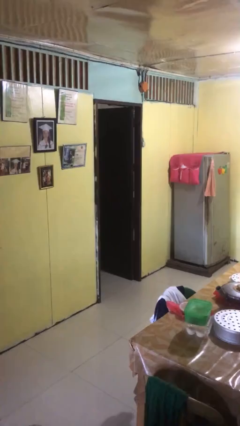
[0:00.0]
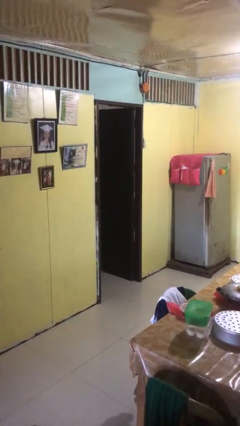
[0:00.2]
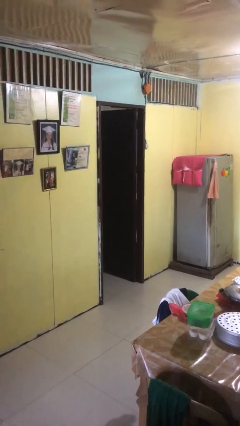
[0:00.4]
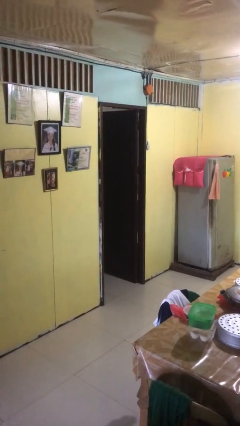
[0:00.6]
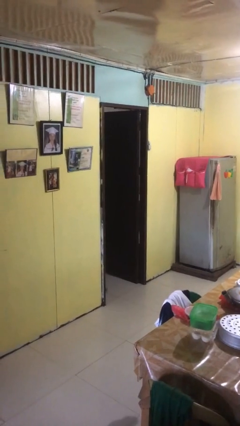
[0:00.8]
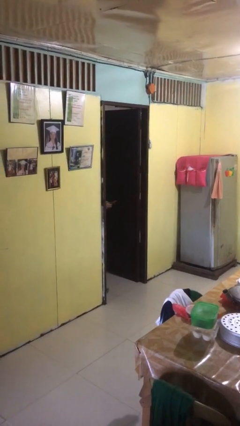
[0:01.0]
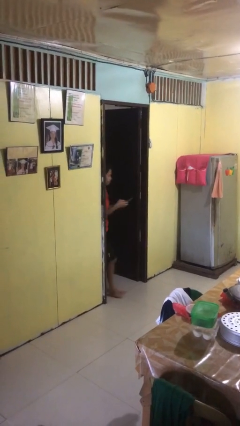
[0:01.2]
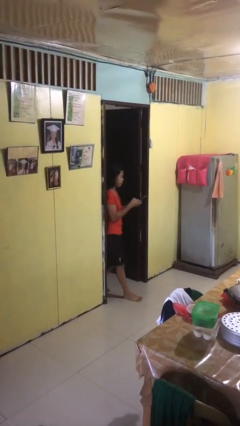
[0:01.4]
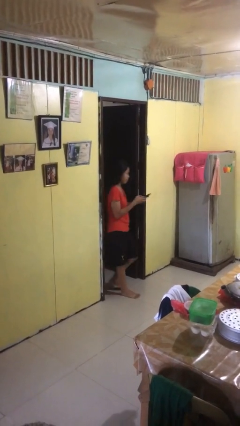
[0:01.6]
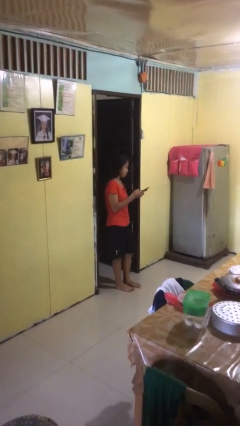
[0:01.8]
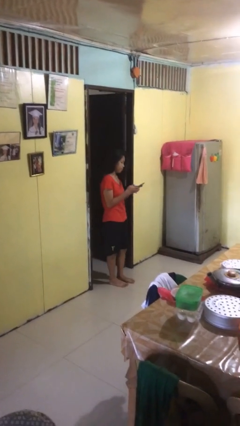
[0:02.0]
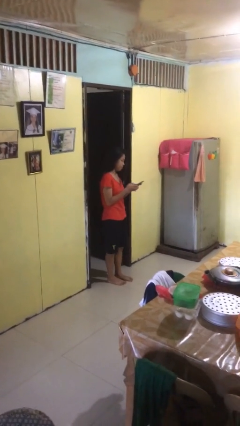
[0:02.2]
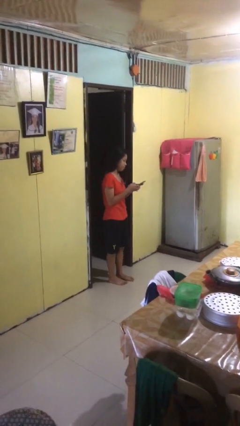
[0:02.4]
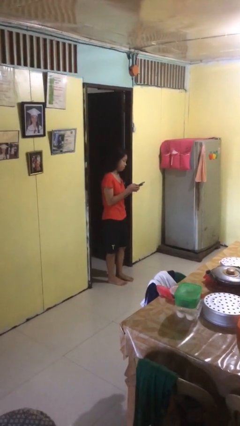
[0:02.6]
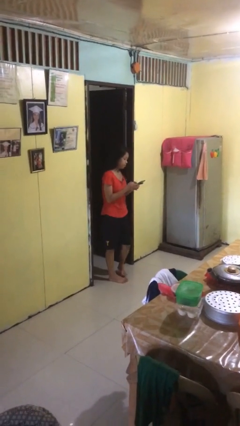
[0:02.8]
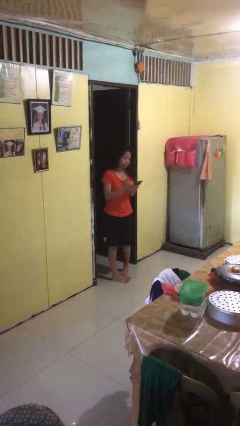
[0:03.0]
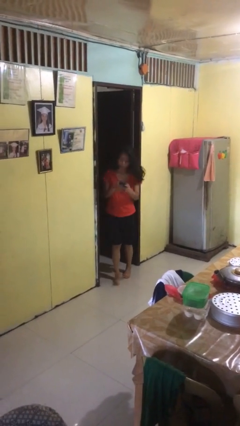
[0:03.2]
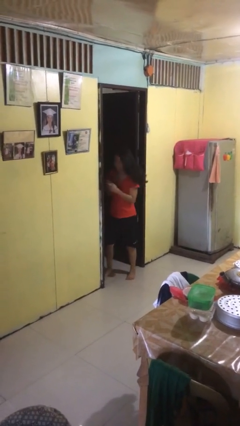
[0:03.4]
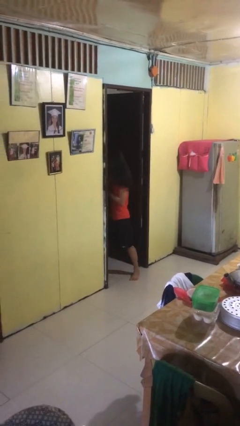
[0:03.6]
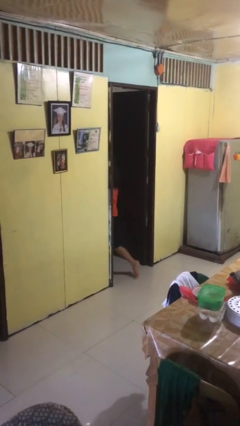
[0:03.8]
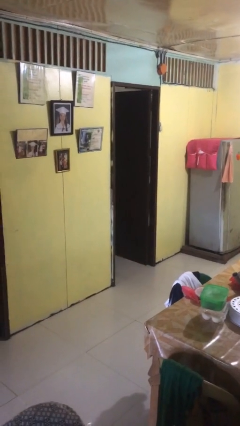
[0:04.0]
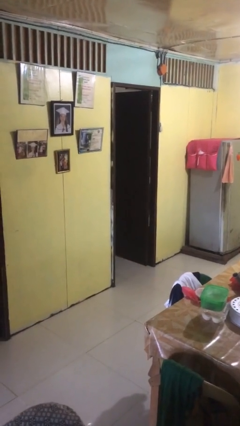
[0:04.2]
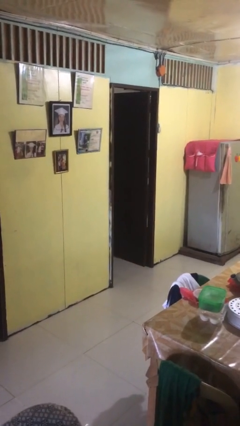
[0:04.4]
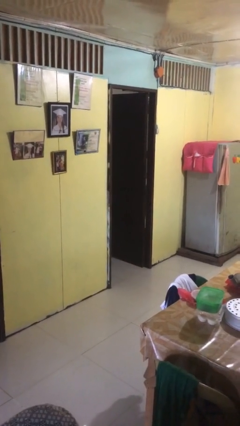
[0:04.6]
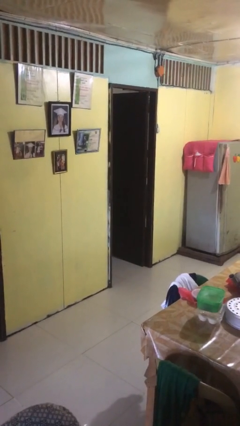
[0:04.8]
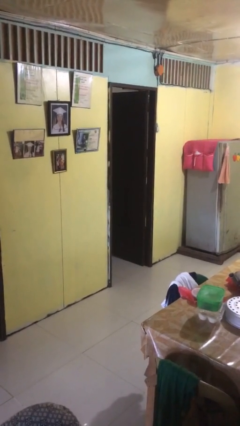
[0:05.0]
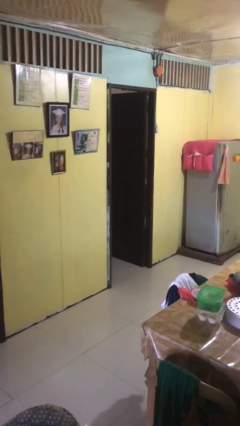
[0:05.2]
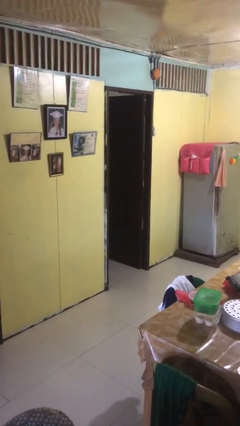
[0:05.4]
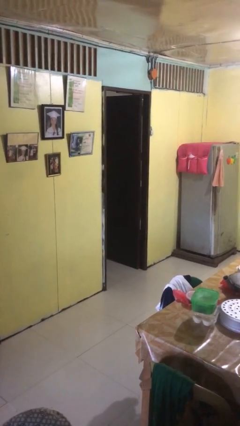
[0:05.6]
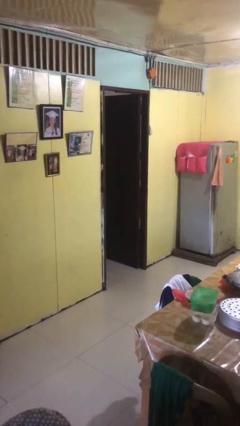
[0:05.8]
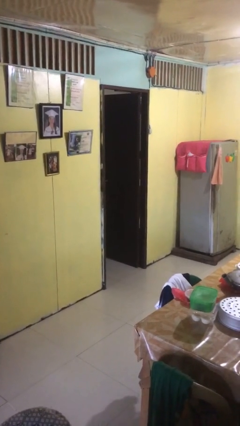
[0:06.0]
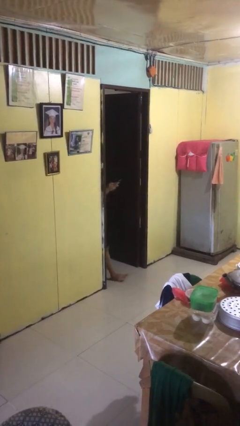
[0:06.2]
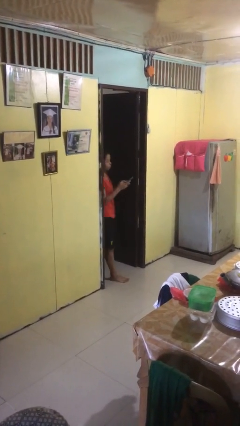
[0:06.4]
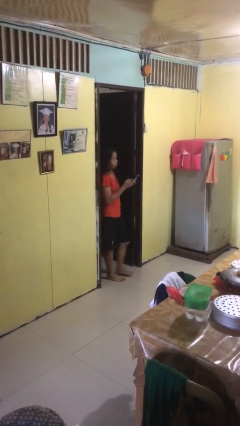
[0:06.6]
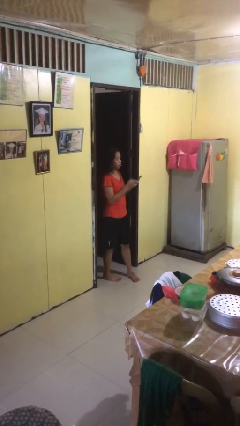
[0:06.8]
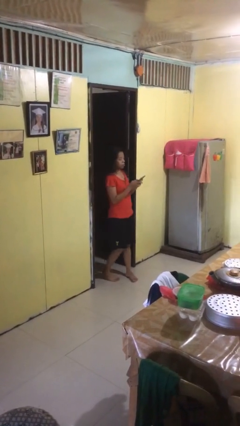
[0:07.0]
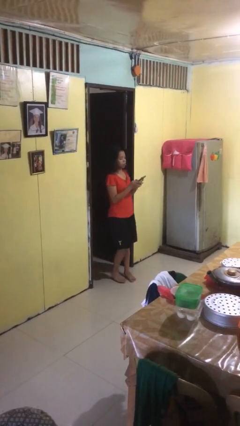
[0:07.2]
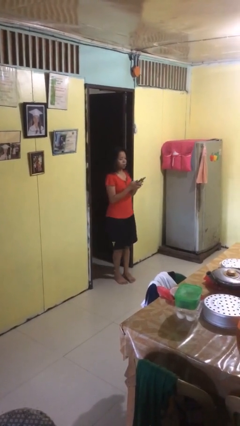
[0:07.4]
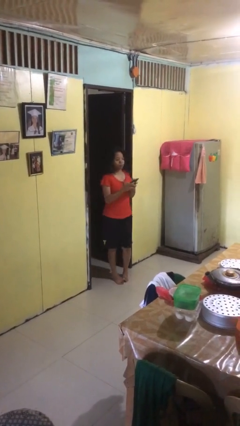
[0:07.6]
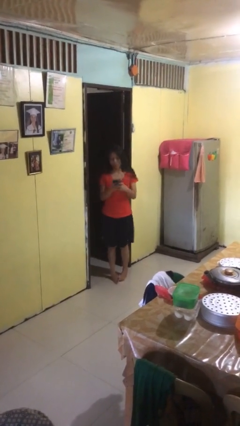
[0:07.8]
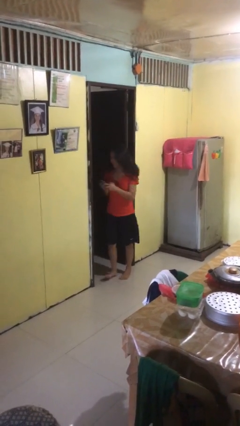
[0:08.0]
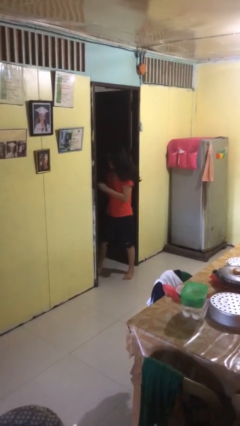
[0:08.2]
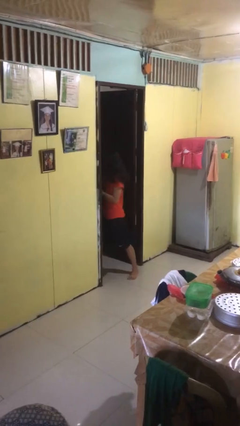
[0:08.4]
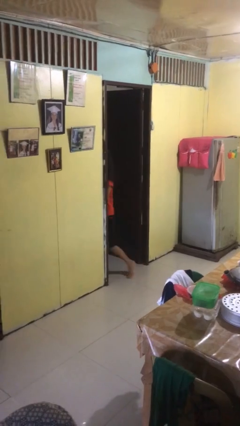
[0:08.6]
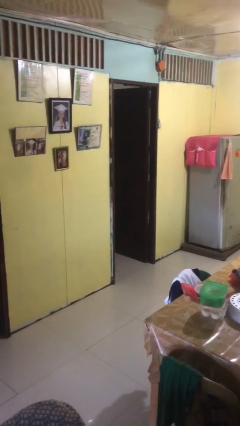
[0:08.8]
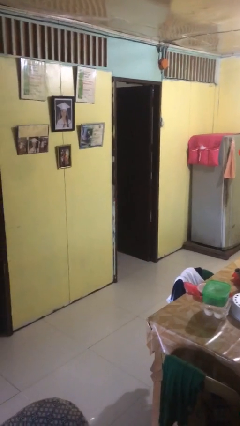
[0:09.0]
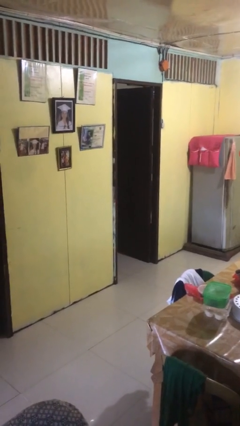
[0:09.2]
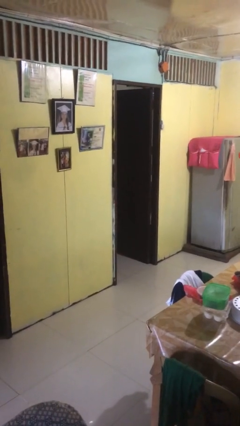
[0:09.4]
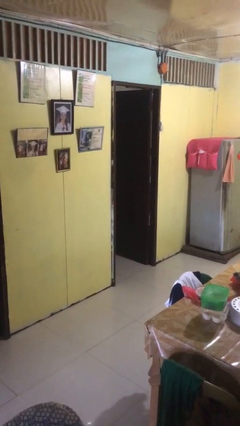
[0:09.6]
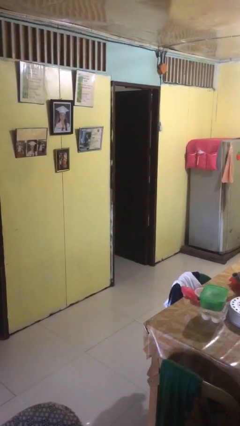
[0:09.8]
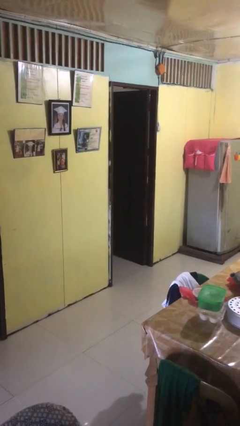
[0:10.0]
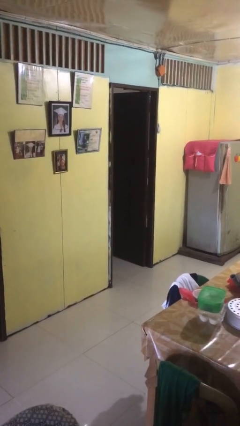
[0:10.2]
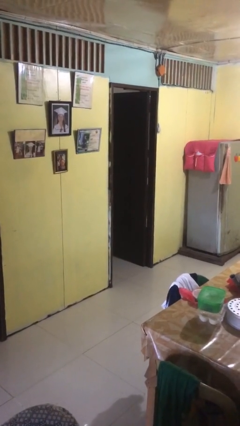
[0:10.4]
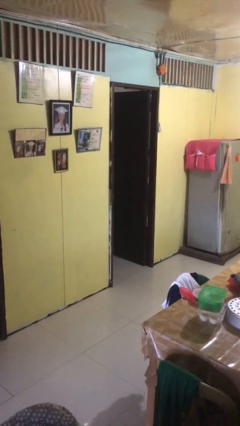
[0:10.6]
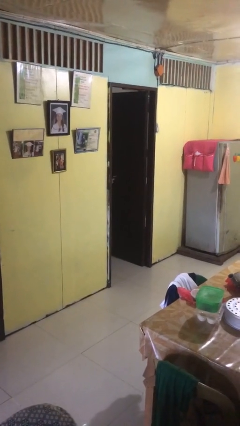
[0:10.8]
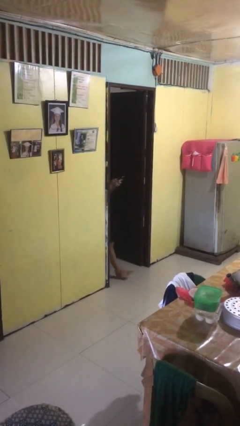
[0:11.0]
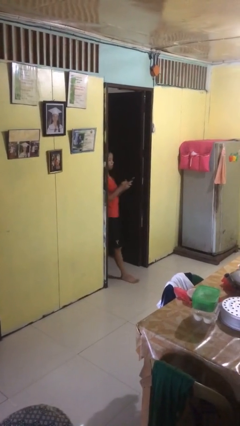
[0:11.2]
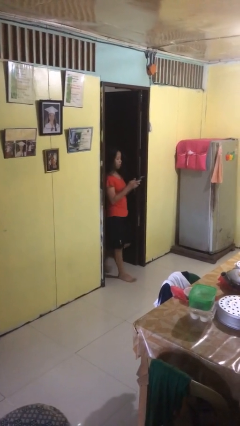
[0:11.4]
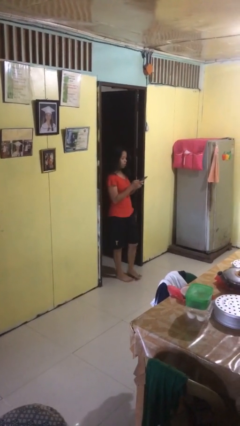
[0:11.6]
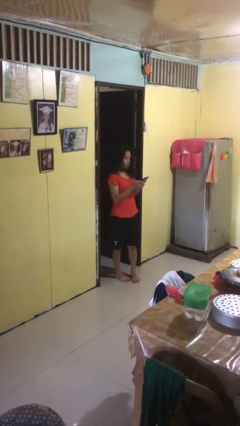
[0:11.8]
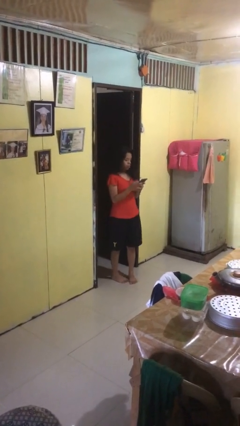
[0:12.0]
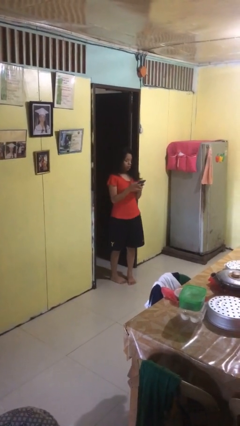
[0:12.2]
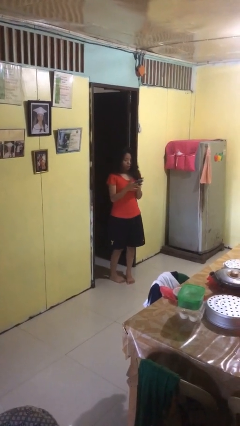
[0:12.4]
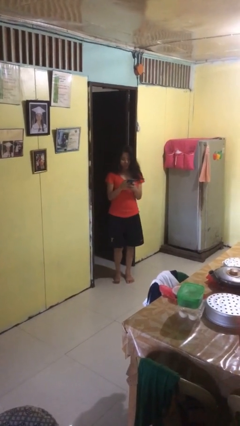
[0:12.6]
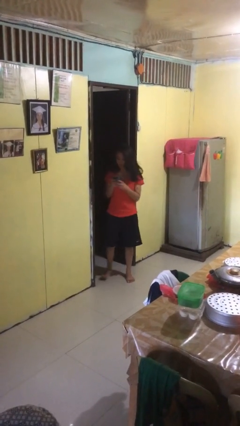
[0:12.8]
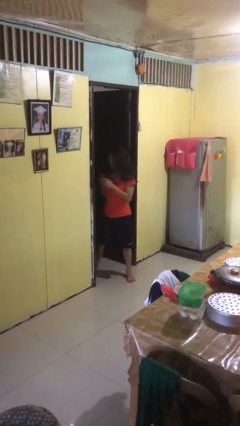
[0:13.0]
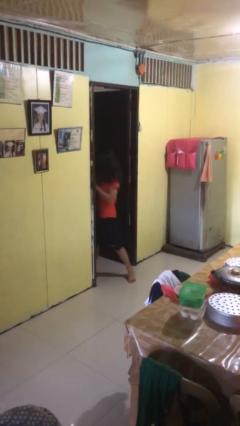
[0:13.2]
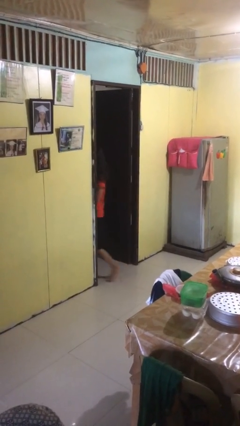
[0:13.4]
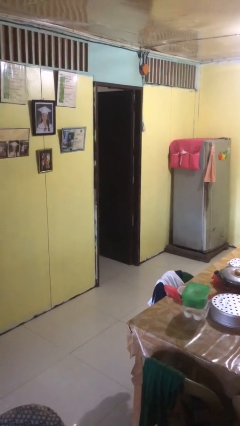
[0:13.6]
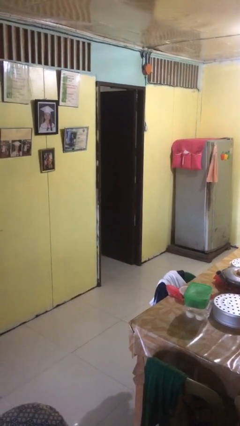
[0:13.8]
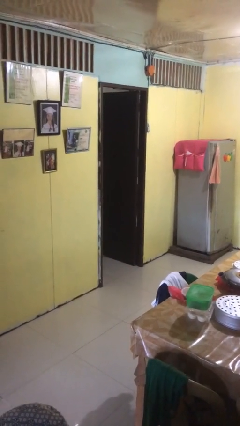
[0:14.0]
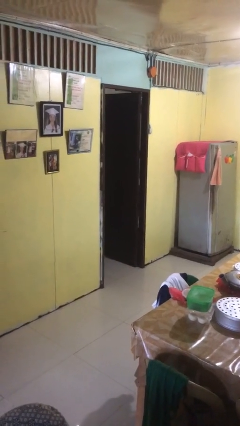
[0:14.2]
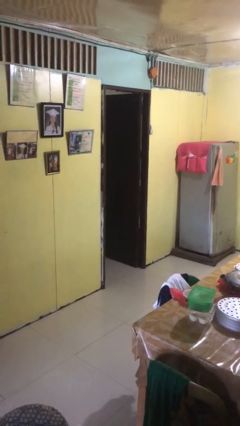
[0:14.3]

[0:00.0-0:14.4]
person texts on phone

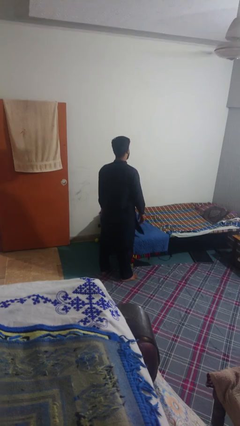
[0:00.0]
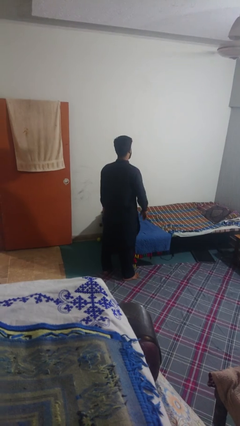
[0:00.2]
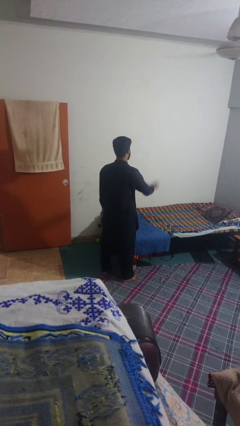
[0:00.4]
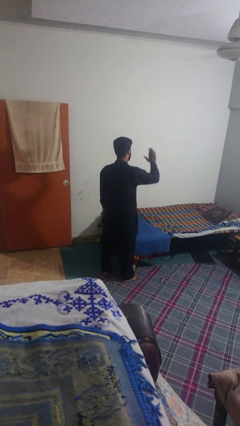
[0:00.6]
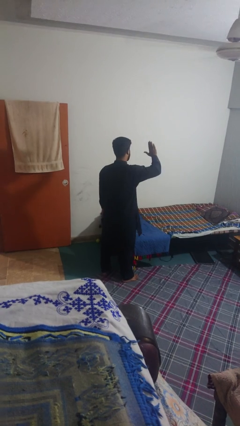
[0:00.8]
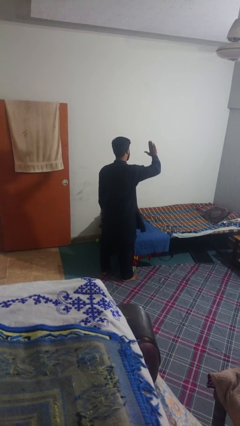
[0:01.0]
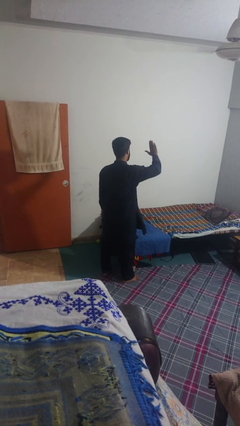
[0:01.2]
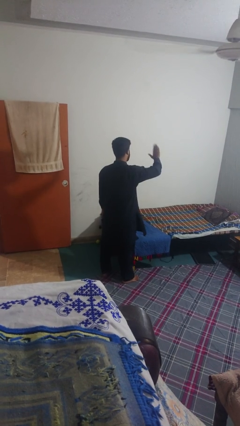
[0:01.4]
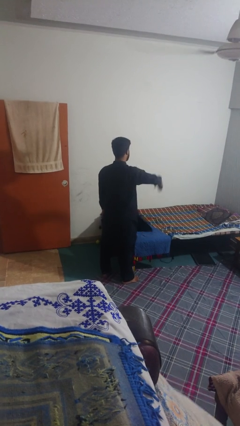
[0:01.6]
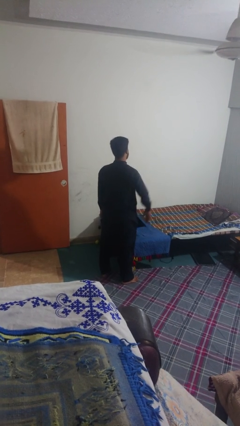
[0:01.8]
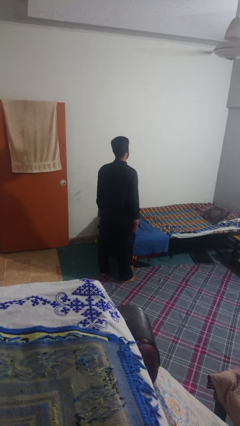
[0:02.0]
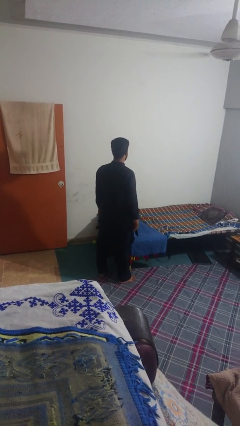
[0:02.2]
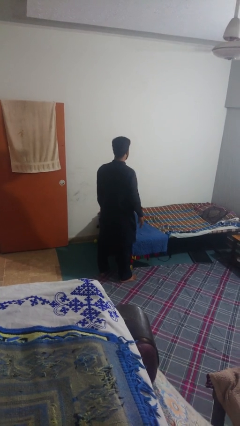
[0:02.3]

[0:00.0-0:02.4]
person gestures stop

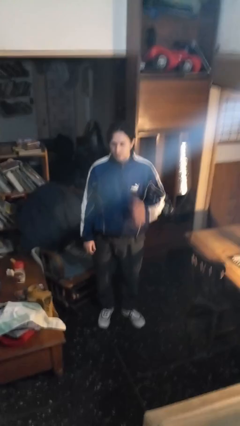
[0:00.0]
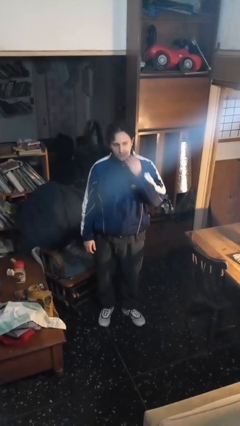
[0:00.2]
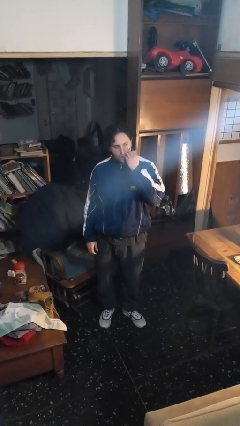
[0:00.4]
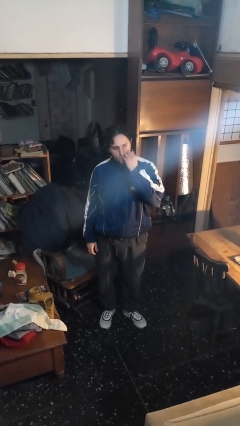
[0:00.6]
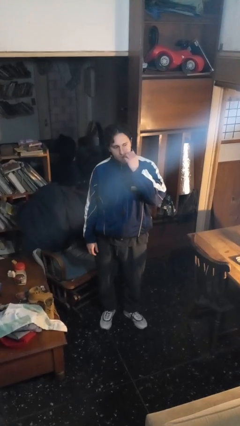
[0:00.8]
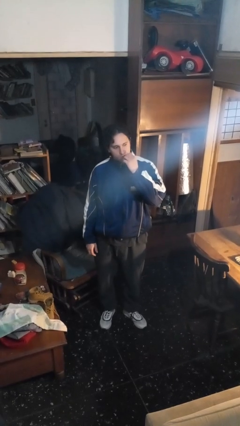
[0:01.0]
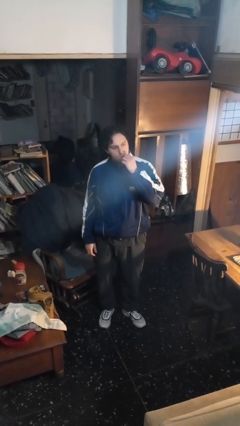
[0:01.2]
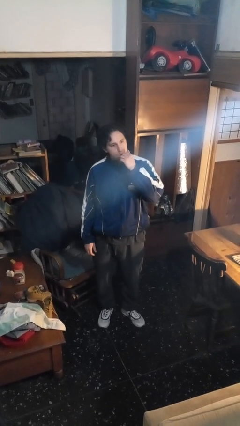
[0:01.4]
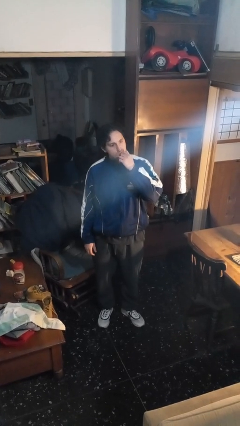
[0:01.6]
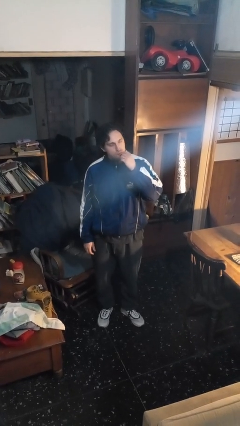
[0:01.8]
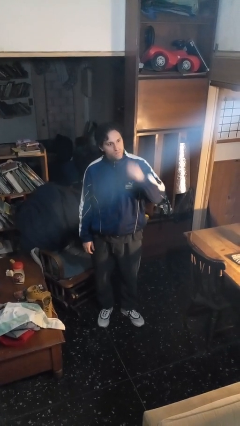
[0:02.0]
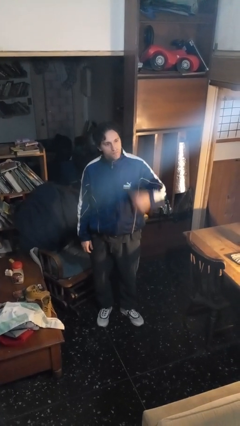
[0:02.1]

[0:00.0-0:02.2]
person licks fingers
